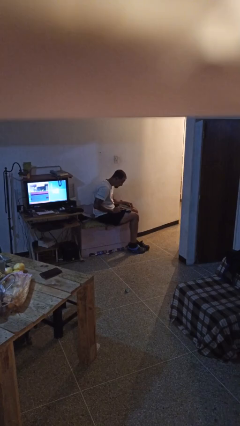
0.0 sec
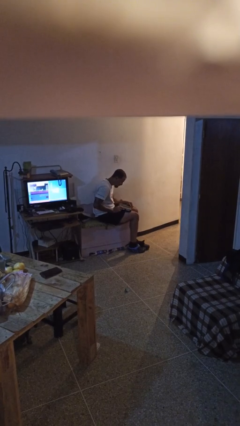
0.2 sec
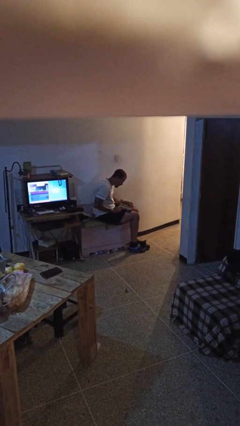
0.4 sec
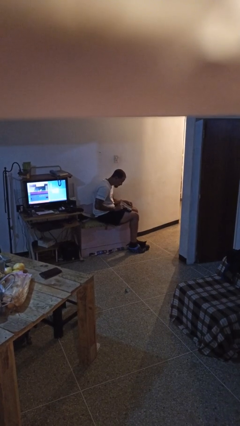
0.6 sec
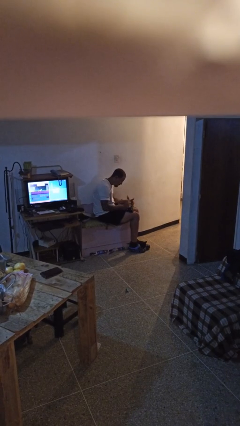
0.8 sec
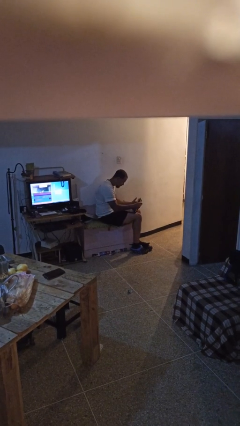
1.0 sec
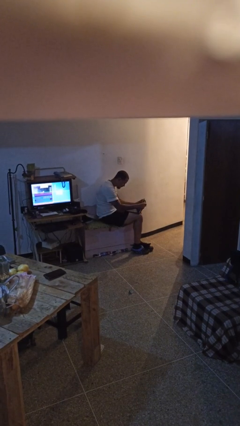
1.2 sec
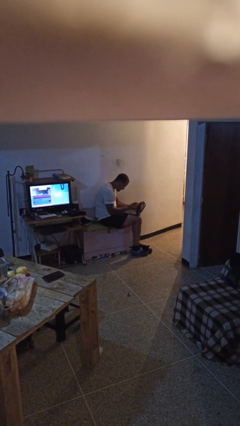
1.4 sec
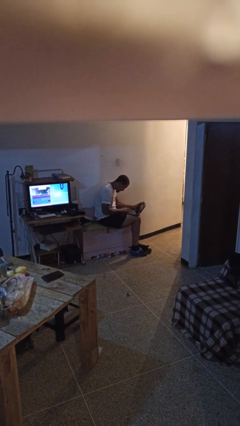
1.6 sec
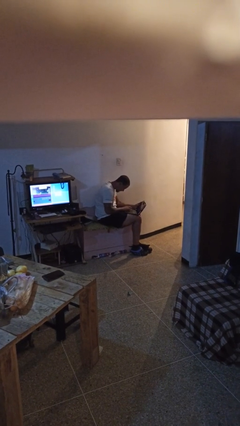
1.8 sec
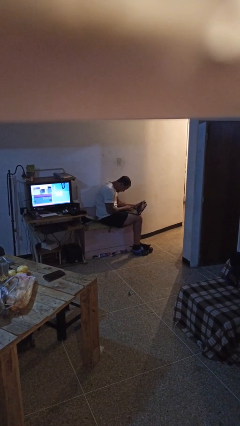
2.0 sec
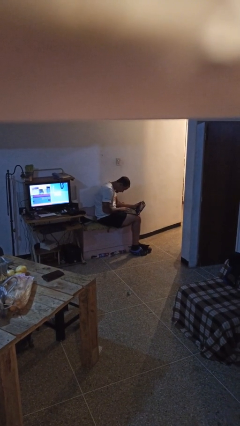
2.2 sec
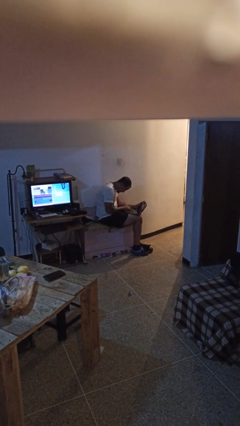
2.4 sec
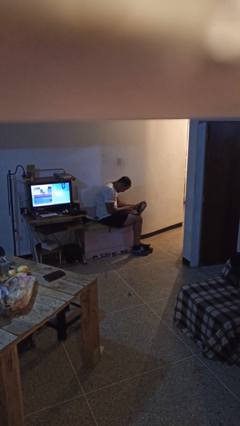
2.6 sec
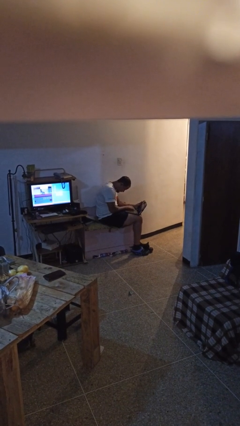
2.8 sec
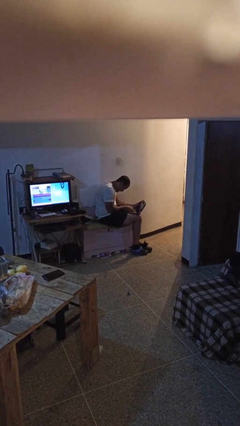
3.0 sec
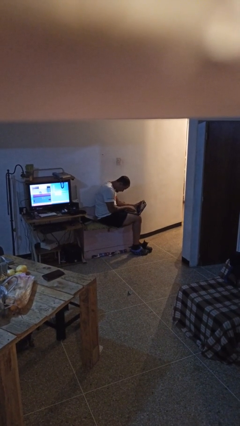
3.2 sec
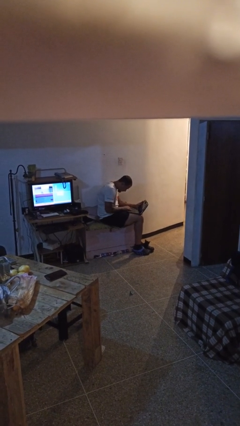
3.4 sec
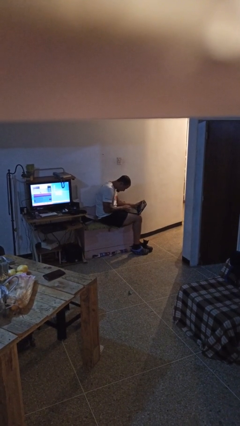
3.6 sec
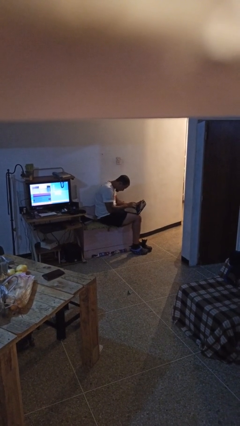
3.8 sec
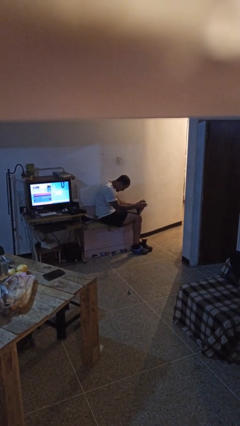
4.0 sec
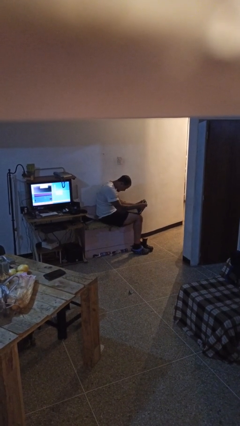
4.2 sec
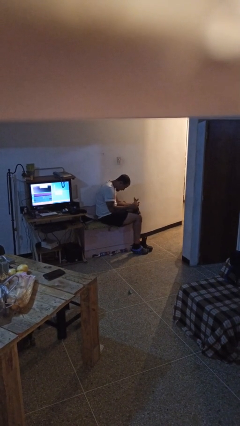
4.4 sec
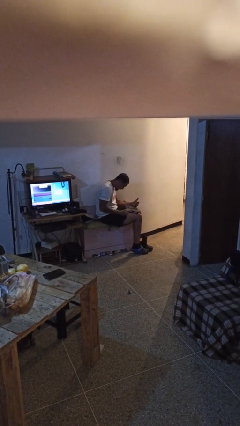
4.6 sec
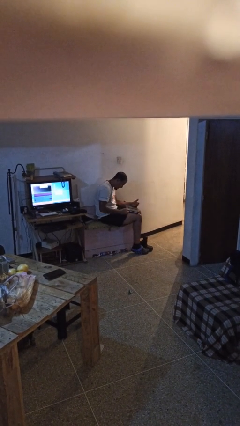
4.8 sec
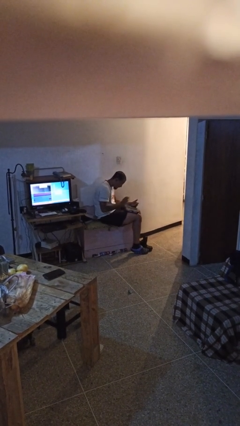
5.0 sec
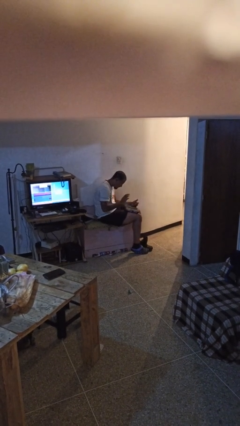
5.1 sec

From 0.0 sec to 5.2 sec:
person interacts with laptop

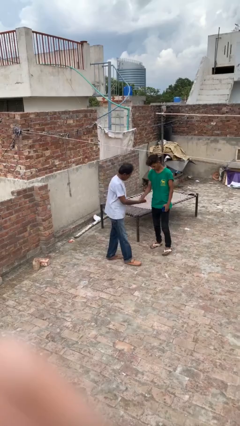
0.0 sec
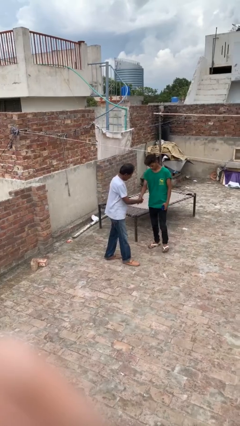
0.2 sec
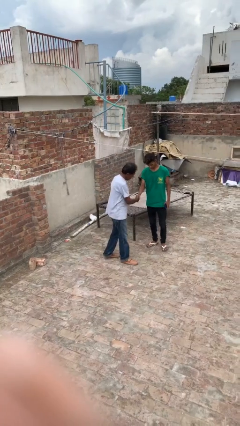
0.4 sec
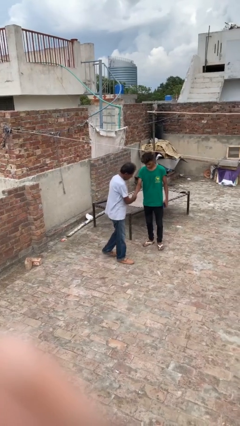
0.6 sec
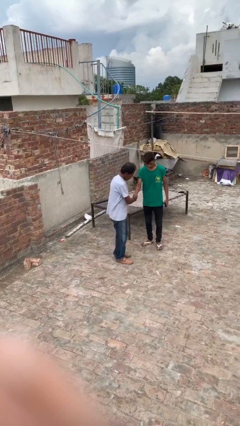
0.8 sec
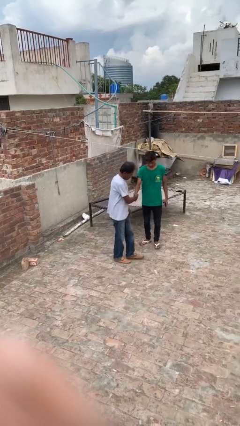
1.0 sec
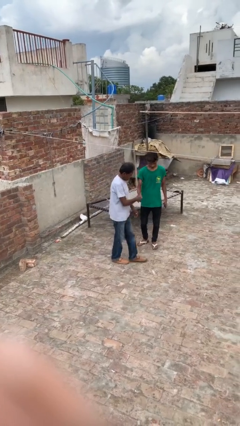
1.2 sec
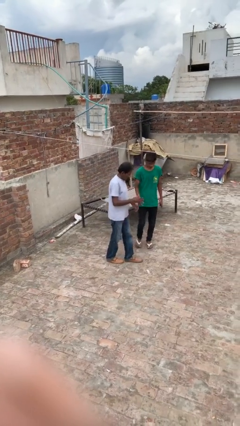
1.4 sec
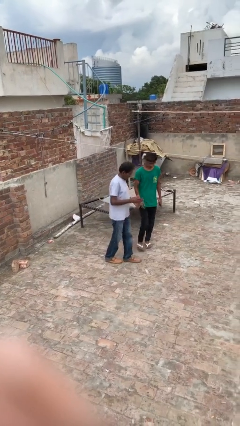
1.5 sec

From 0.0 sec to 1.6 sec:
person shakes hand

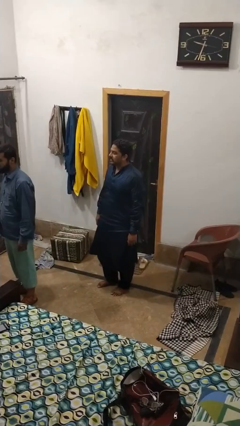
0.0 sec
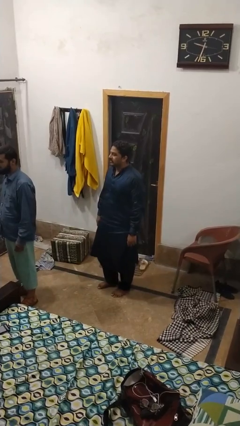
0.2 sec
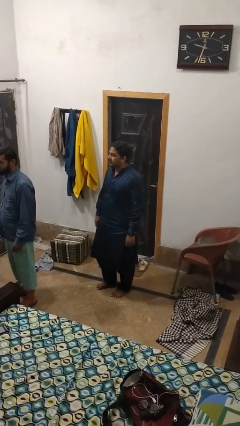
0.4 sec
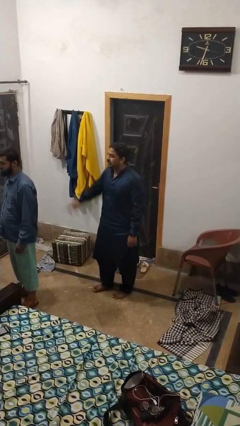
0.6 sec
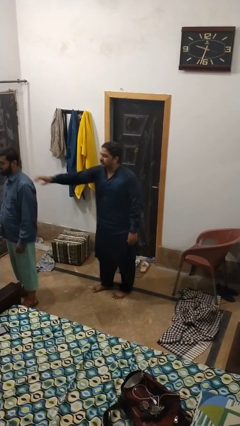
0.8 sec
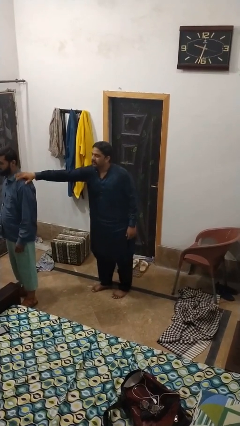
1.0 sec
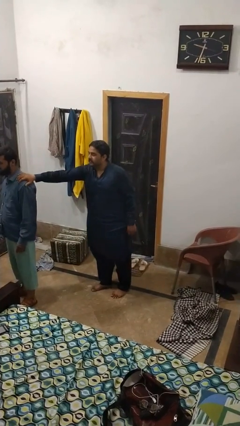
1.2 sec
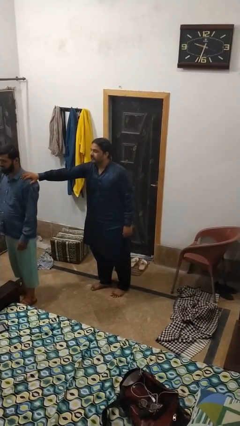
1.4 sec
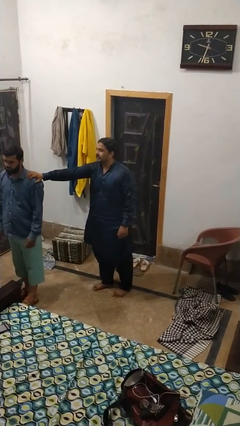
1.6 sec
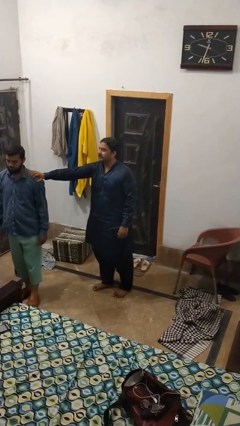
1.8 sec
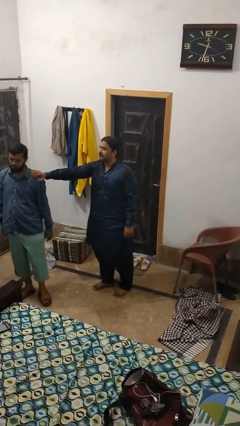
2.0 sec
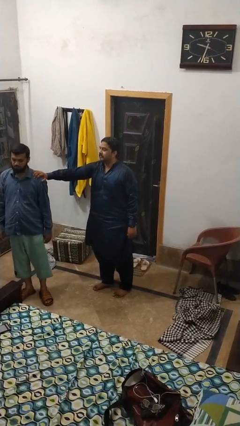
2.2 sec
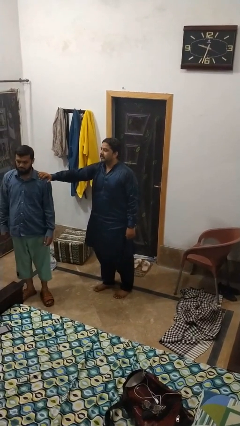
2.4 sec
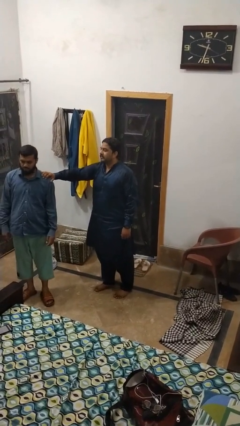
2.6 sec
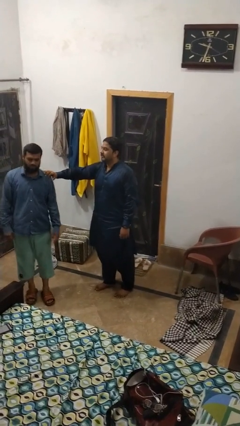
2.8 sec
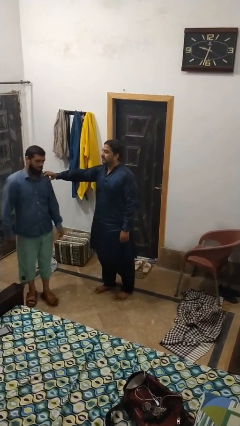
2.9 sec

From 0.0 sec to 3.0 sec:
person grabs person by shoulder

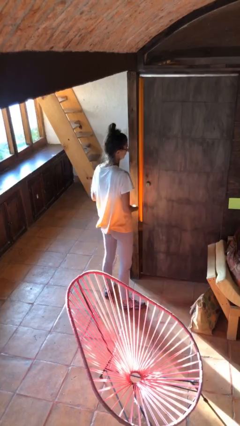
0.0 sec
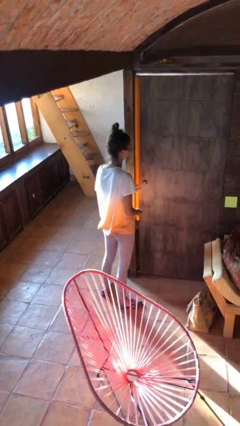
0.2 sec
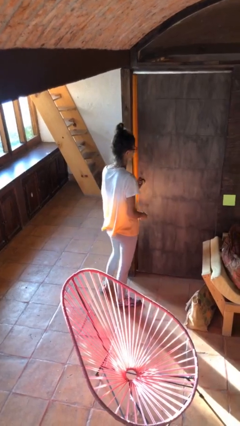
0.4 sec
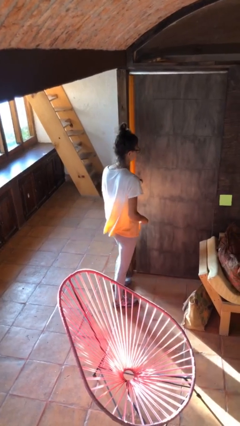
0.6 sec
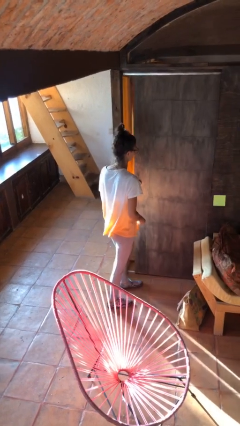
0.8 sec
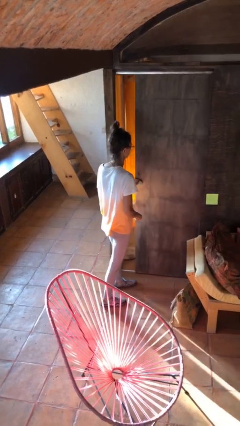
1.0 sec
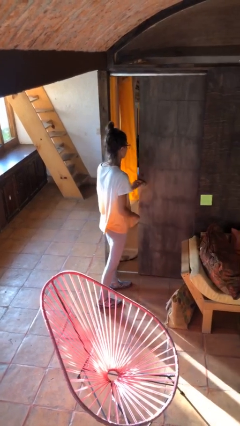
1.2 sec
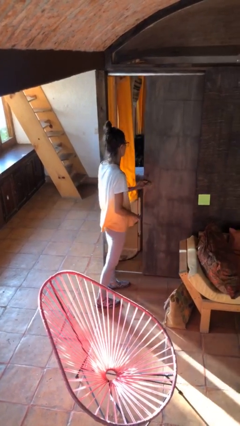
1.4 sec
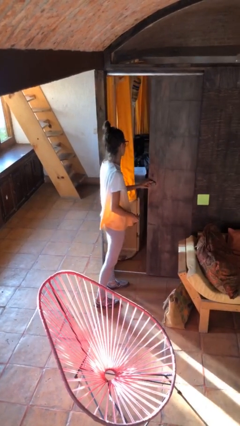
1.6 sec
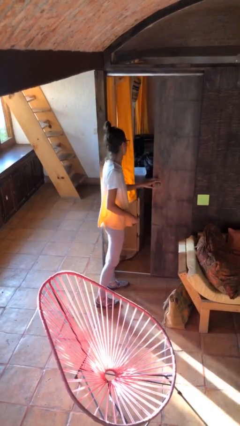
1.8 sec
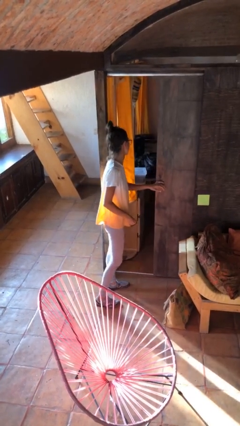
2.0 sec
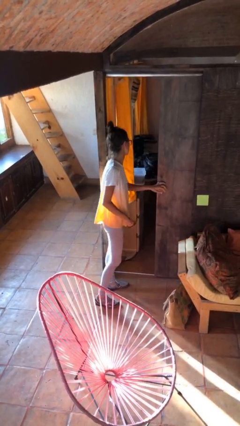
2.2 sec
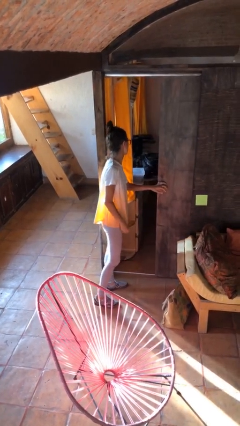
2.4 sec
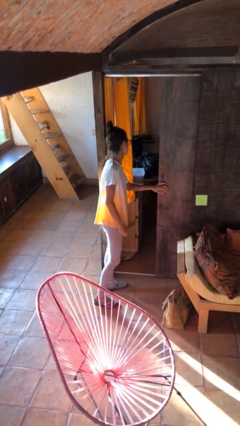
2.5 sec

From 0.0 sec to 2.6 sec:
person opens sliding door

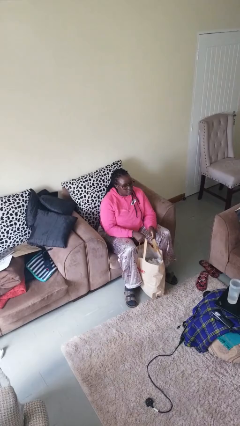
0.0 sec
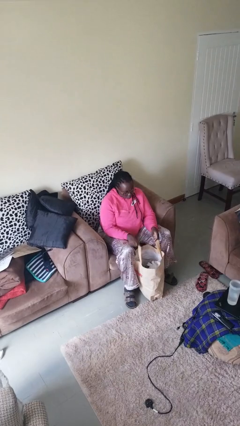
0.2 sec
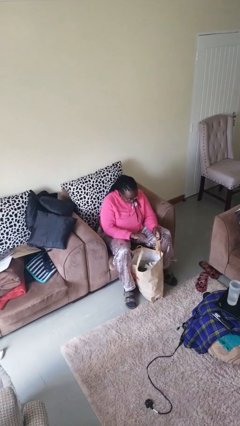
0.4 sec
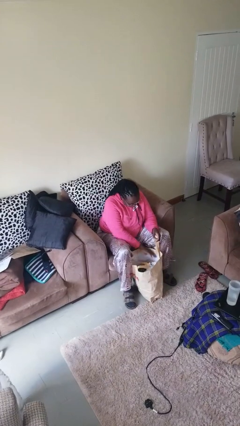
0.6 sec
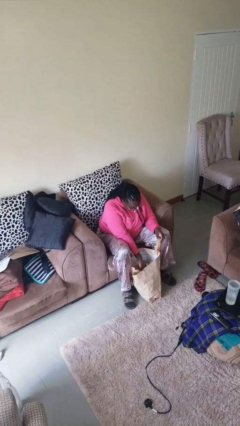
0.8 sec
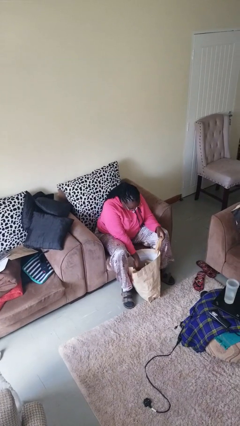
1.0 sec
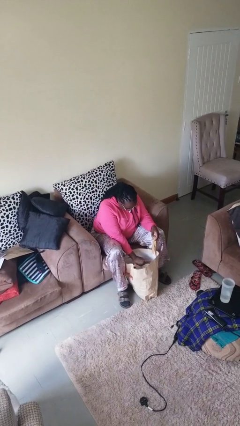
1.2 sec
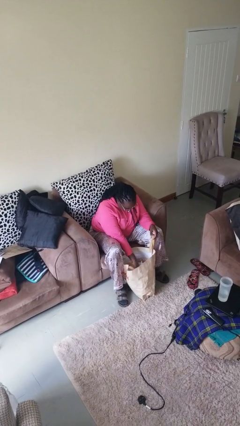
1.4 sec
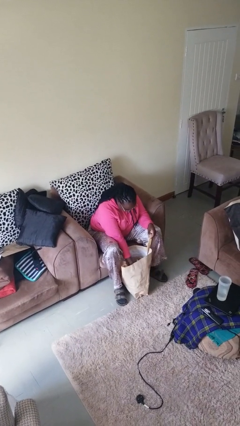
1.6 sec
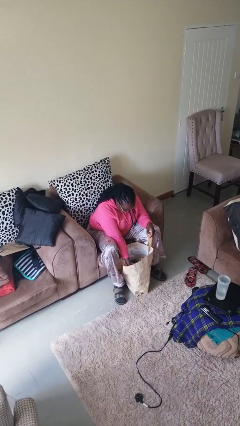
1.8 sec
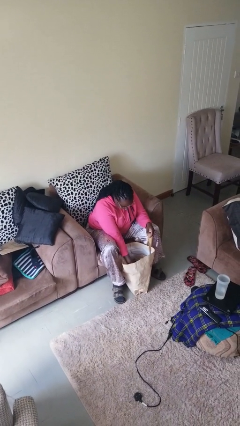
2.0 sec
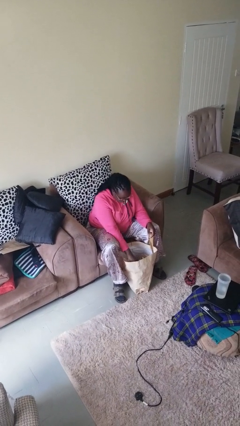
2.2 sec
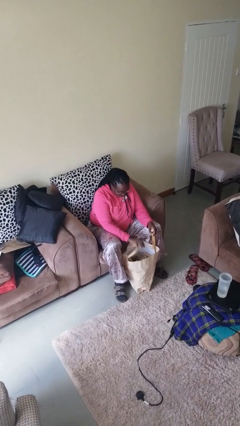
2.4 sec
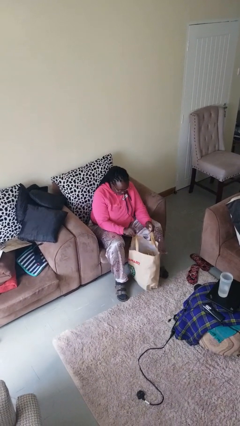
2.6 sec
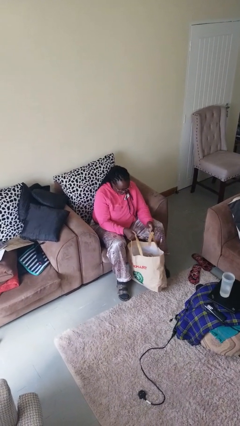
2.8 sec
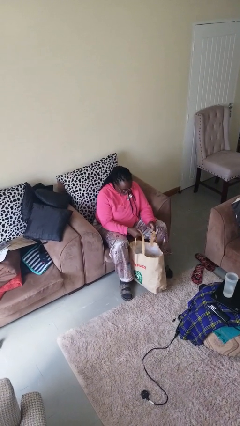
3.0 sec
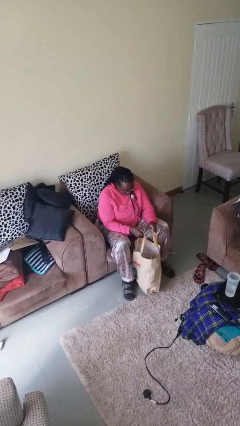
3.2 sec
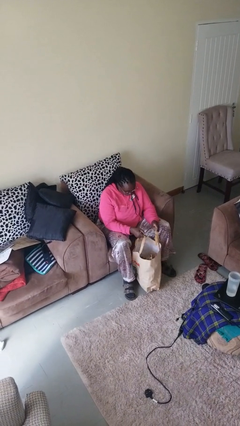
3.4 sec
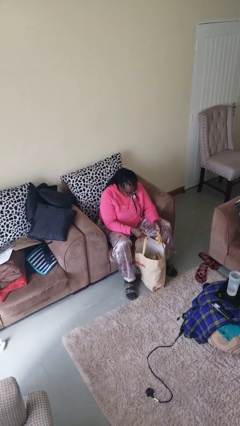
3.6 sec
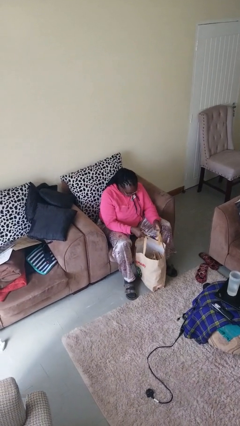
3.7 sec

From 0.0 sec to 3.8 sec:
person searches in bag

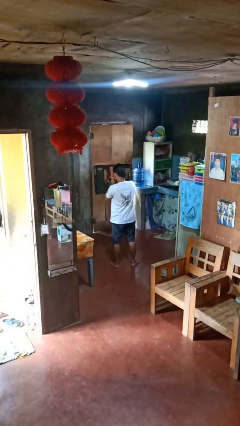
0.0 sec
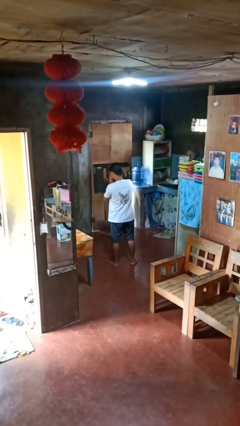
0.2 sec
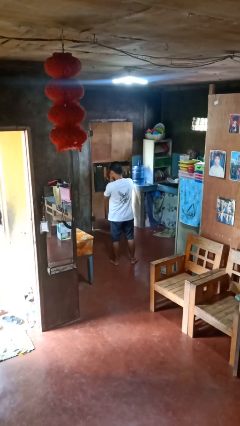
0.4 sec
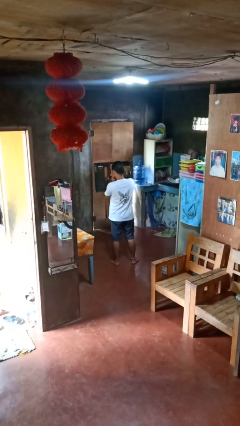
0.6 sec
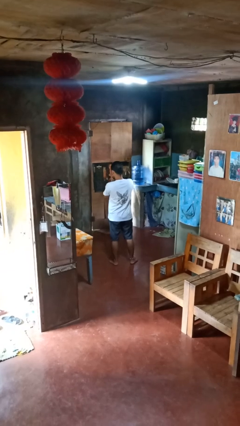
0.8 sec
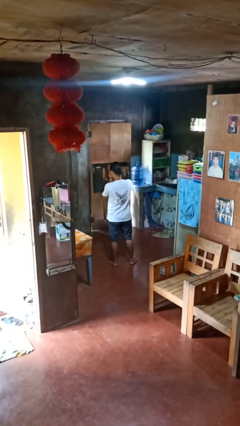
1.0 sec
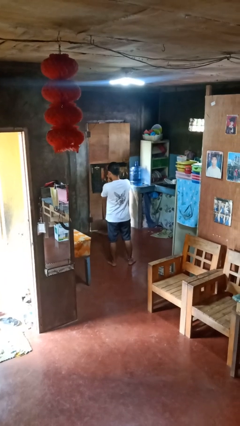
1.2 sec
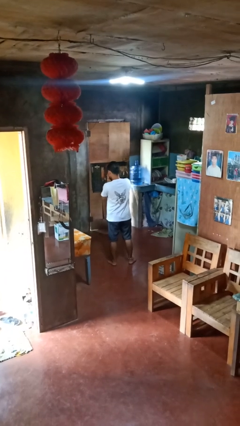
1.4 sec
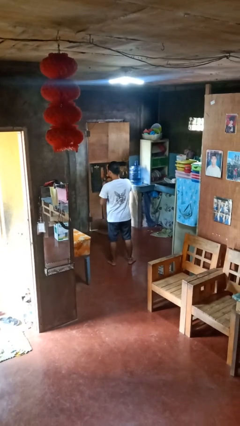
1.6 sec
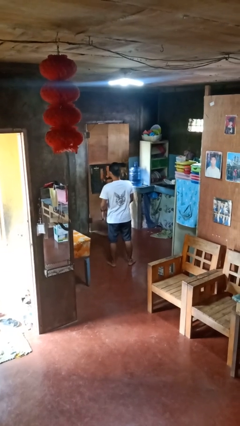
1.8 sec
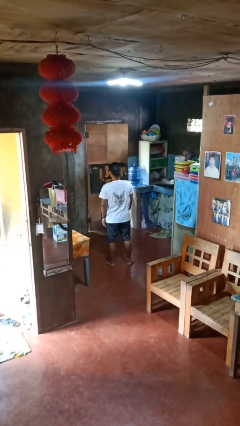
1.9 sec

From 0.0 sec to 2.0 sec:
person sneezes into hand
